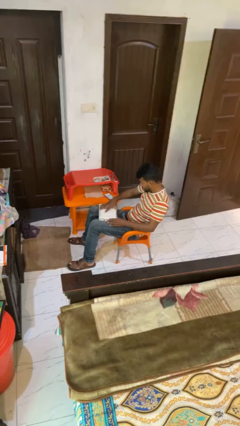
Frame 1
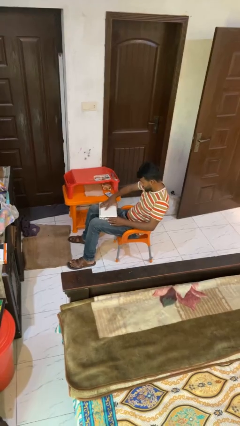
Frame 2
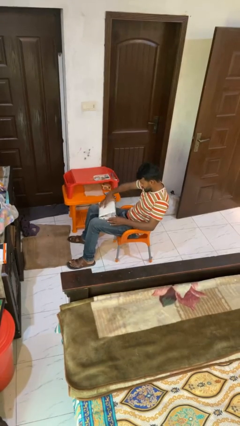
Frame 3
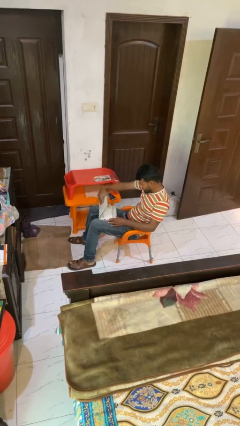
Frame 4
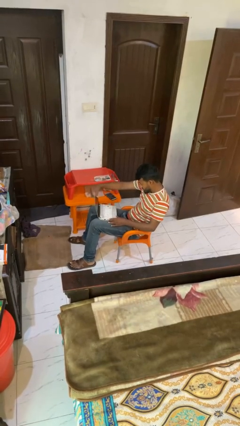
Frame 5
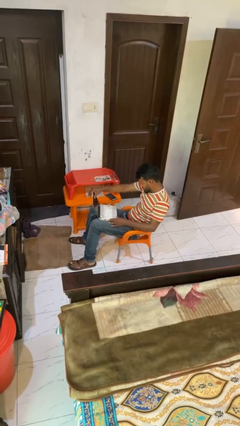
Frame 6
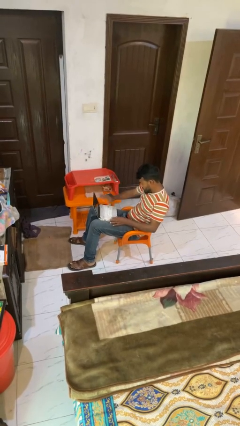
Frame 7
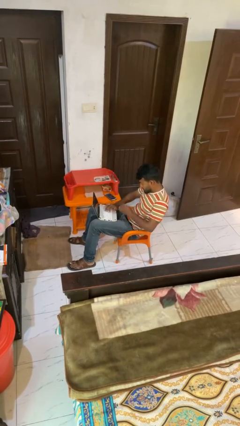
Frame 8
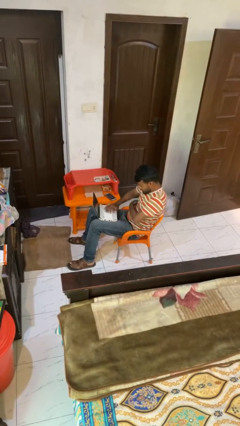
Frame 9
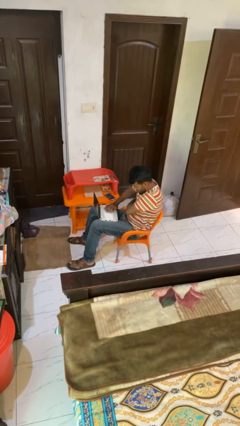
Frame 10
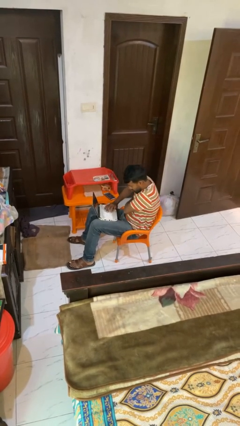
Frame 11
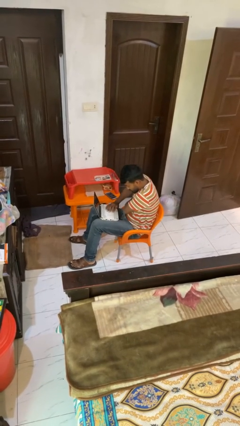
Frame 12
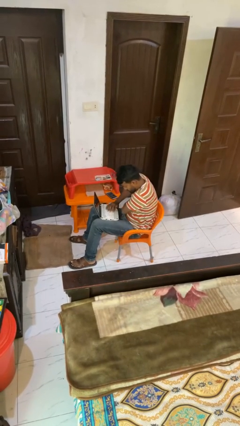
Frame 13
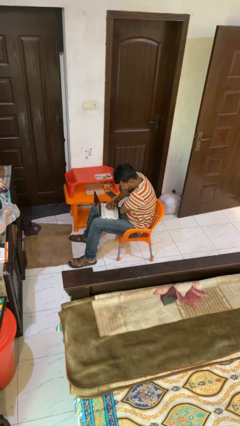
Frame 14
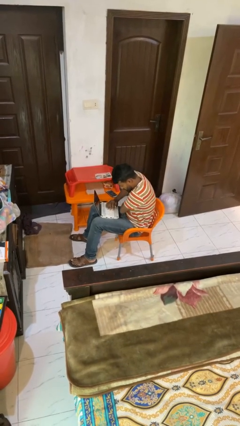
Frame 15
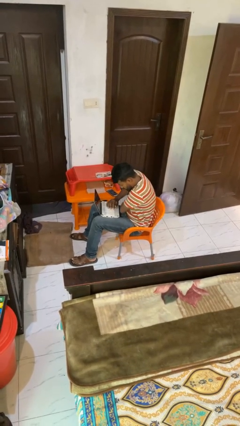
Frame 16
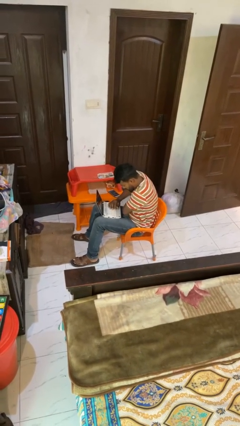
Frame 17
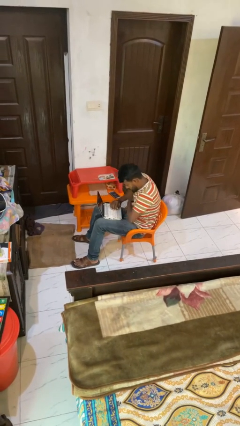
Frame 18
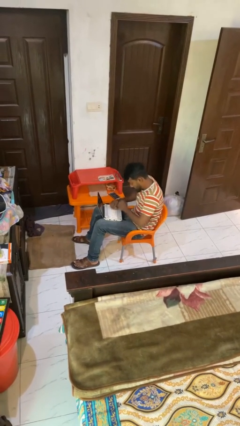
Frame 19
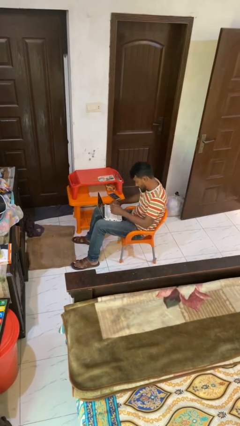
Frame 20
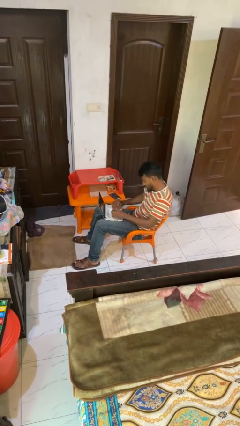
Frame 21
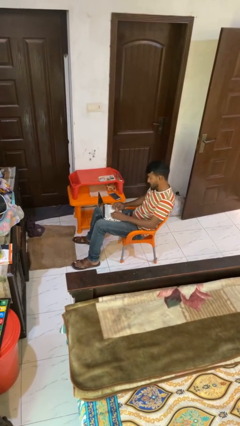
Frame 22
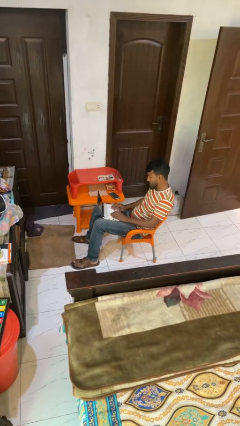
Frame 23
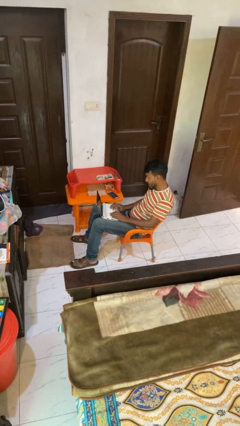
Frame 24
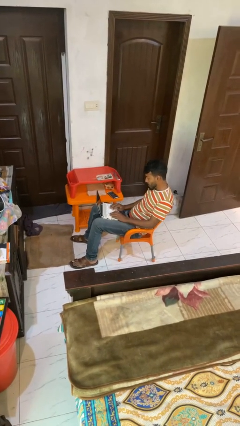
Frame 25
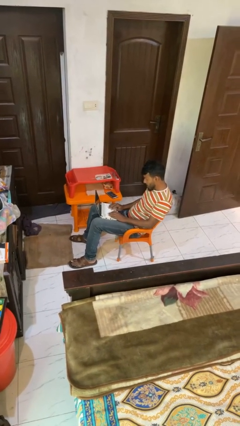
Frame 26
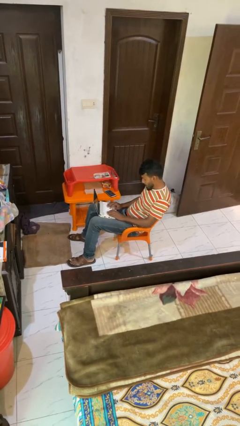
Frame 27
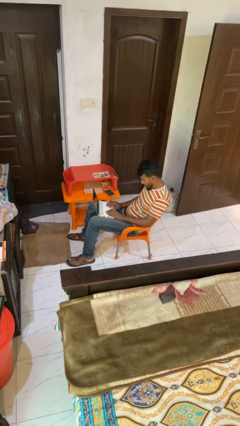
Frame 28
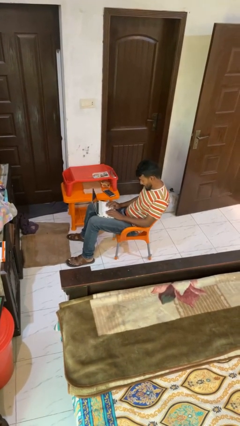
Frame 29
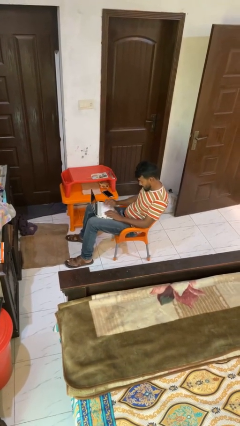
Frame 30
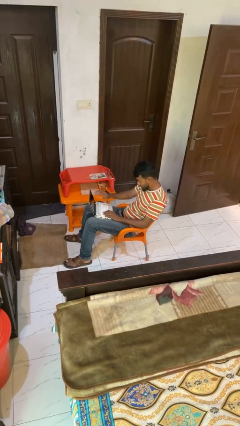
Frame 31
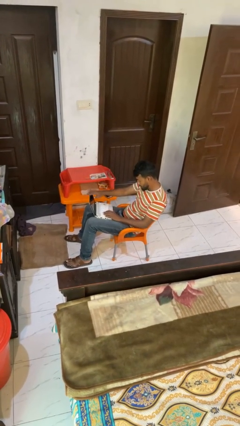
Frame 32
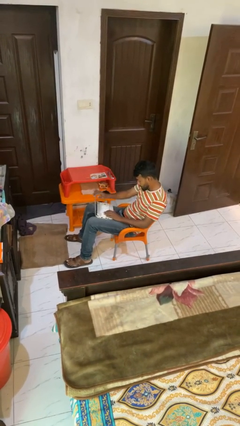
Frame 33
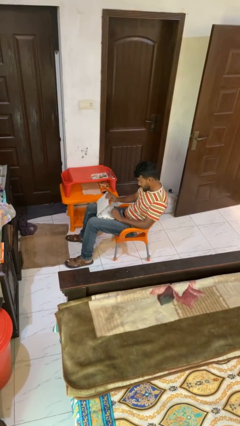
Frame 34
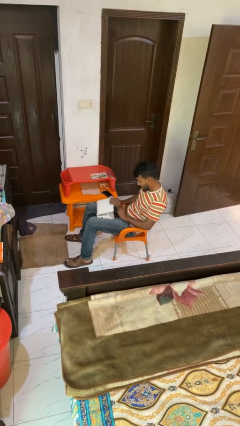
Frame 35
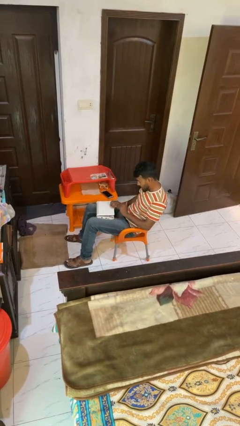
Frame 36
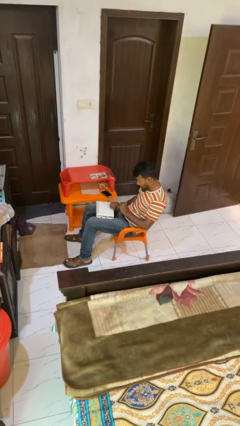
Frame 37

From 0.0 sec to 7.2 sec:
person interacts with laptop

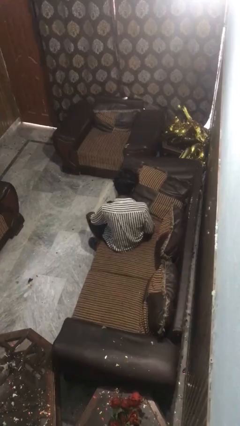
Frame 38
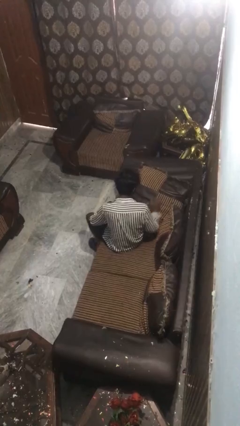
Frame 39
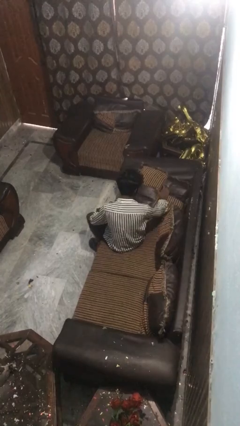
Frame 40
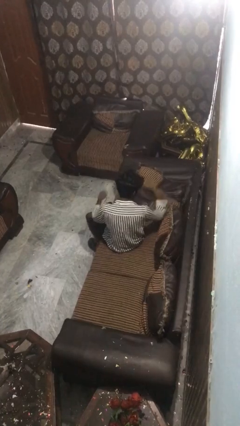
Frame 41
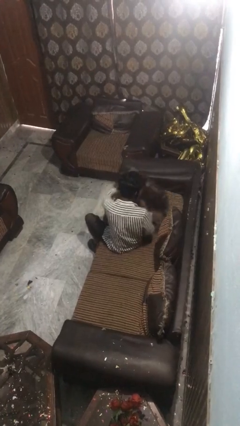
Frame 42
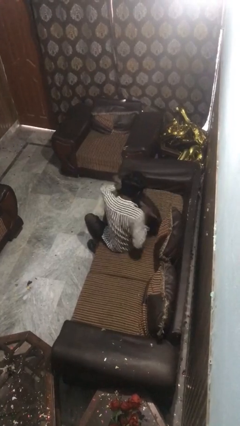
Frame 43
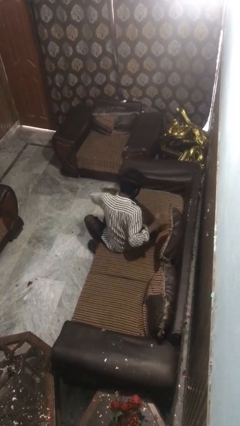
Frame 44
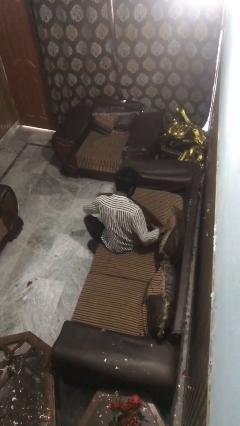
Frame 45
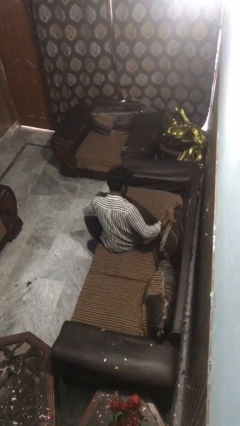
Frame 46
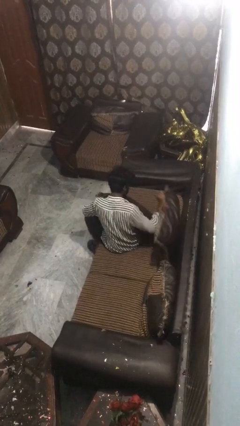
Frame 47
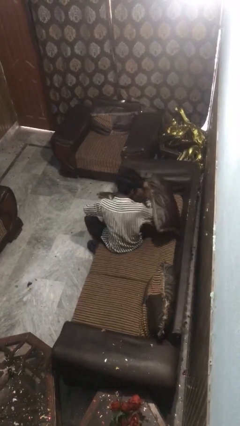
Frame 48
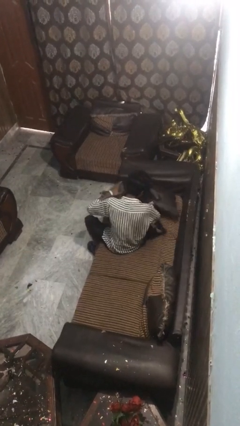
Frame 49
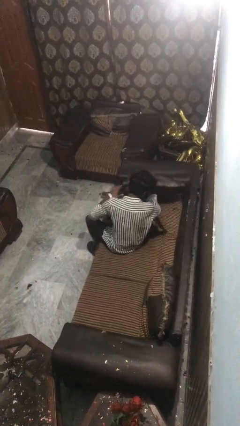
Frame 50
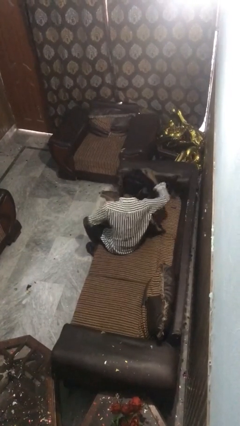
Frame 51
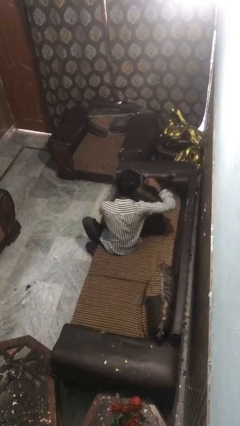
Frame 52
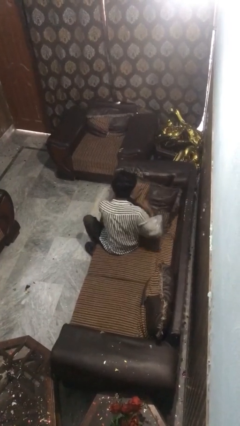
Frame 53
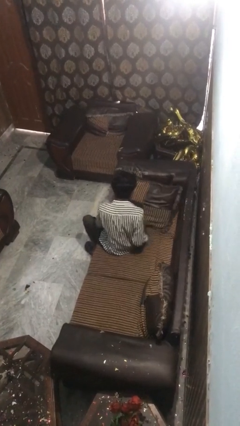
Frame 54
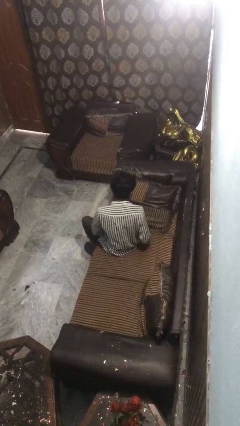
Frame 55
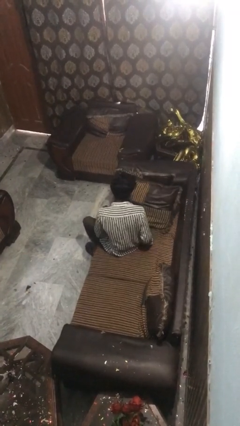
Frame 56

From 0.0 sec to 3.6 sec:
person searches in couch

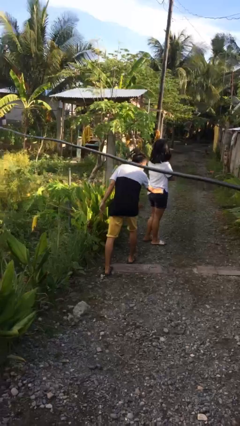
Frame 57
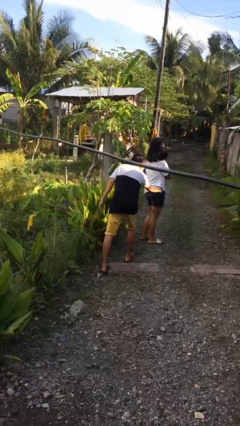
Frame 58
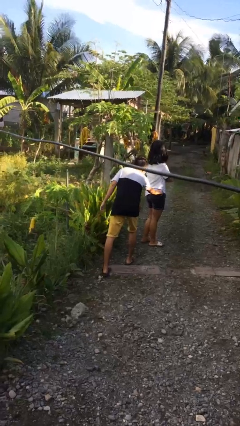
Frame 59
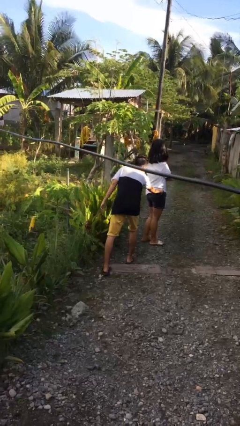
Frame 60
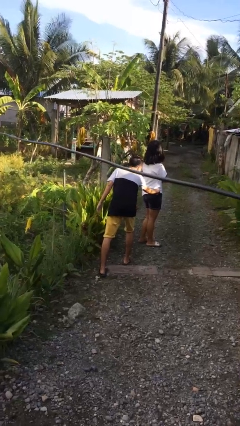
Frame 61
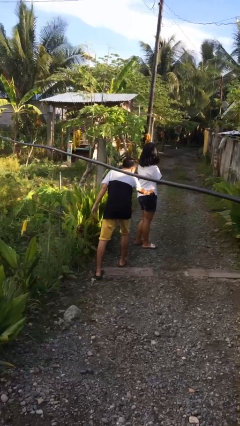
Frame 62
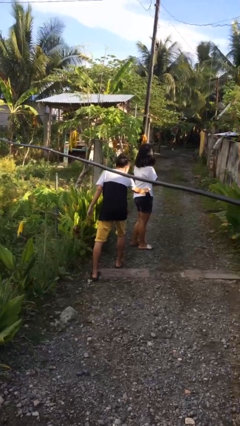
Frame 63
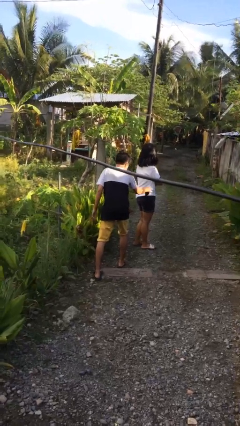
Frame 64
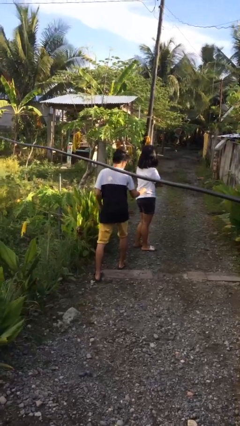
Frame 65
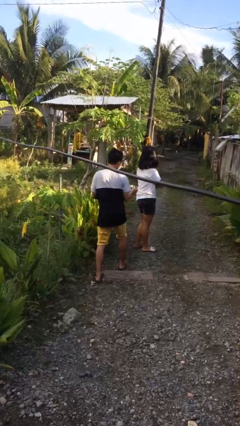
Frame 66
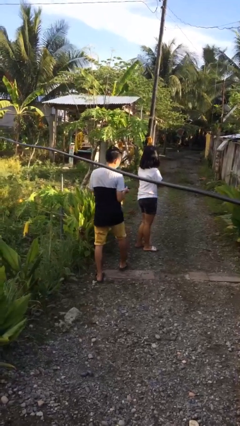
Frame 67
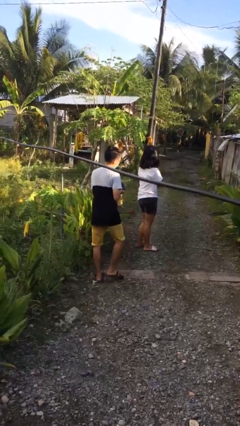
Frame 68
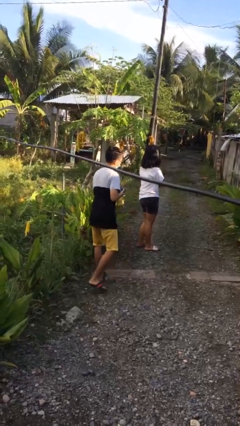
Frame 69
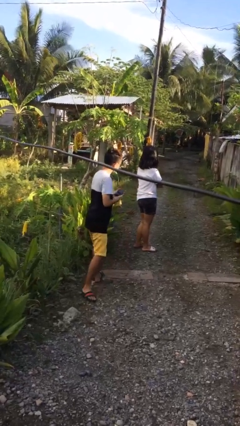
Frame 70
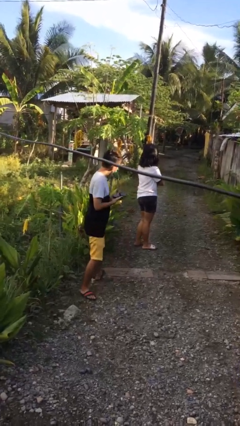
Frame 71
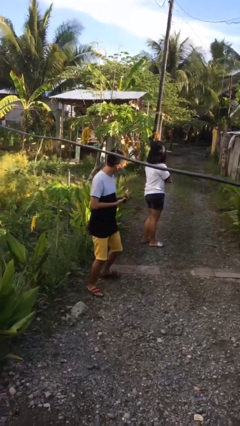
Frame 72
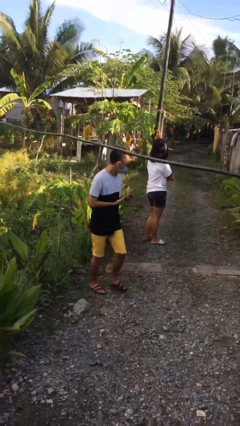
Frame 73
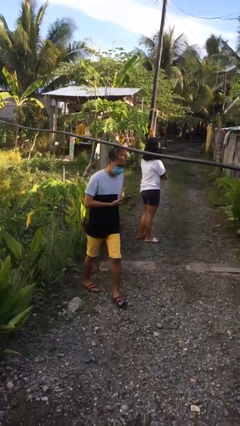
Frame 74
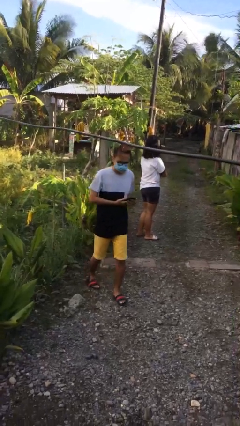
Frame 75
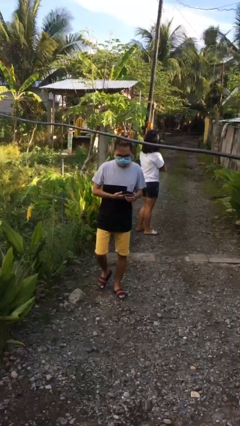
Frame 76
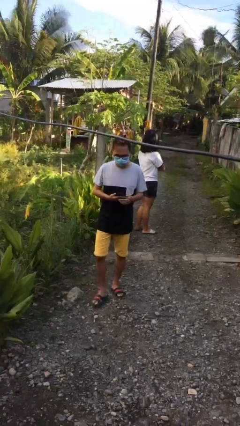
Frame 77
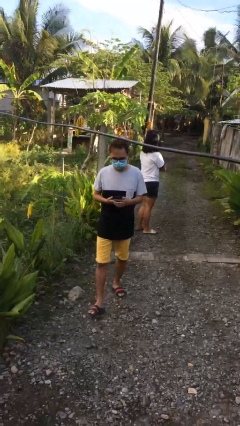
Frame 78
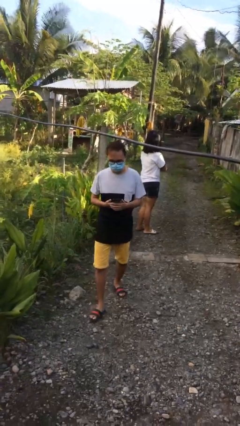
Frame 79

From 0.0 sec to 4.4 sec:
person steals object from person

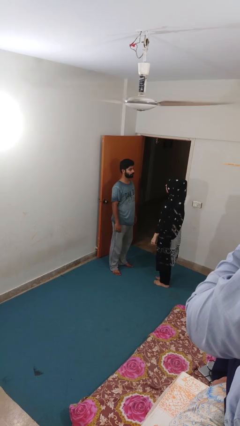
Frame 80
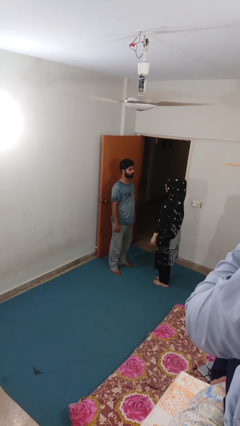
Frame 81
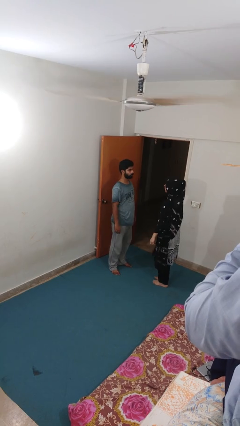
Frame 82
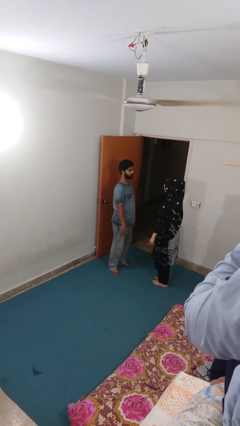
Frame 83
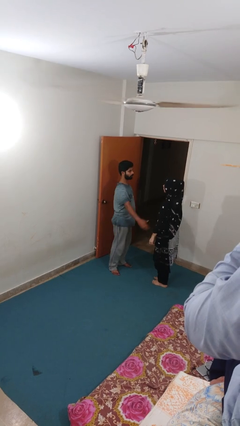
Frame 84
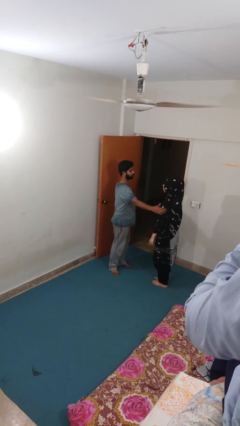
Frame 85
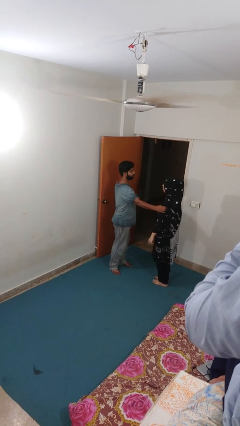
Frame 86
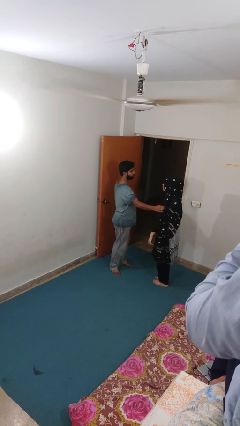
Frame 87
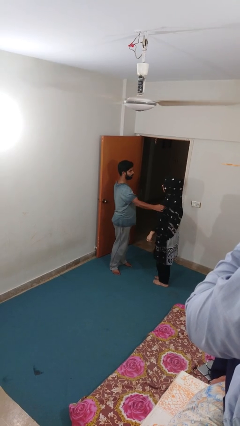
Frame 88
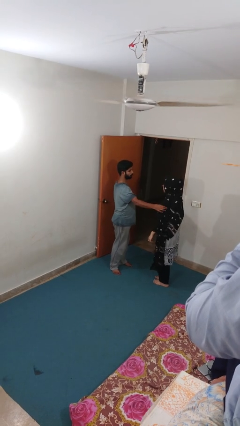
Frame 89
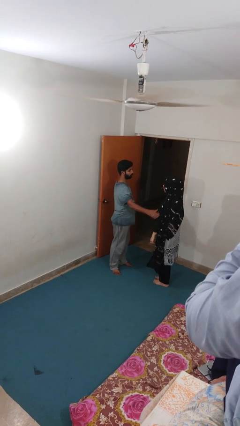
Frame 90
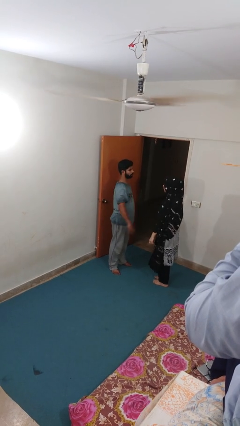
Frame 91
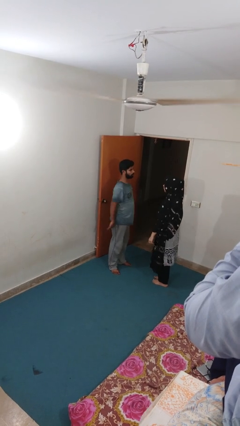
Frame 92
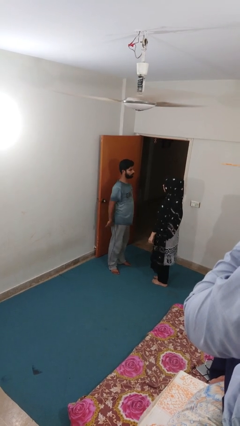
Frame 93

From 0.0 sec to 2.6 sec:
person grabs person by bicep
